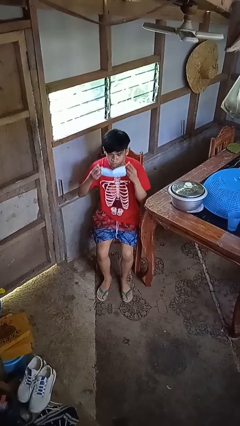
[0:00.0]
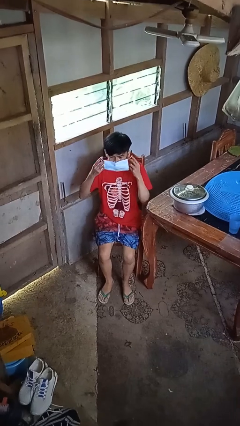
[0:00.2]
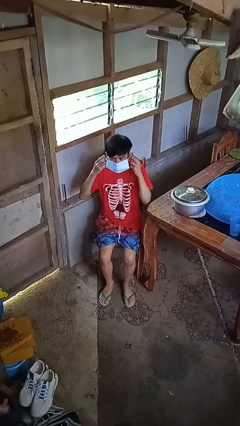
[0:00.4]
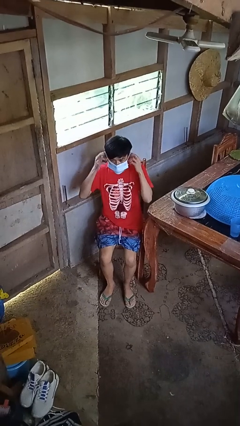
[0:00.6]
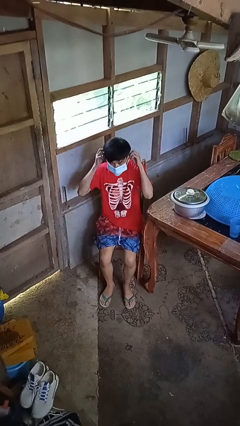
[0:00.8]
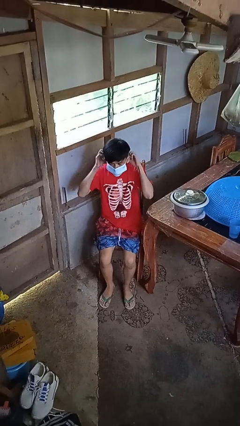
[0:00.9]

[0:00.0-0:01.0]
person puts on facemask

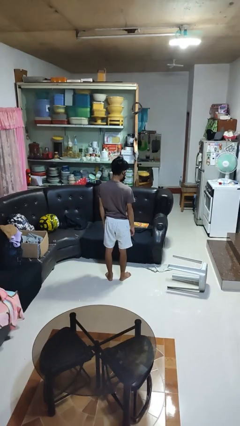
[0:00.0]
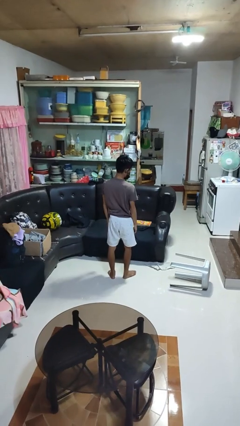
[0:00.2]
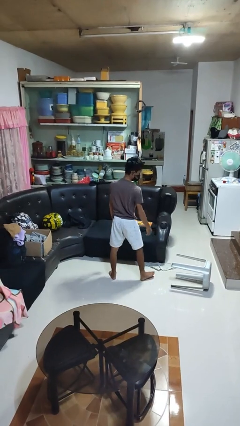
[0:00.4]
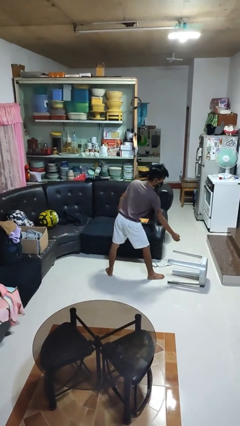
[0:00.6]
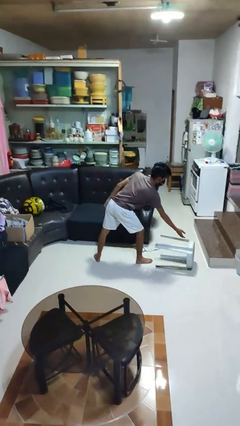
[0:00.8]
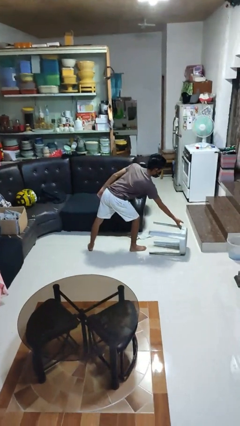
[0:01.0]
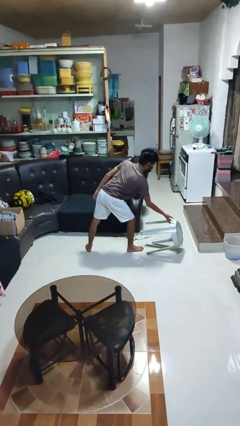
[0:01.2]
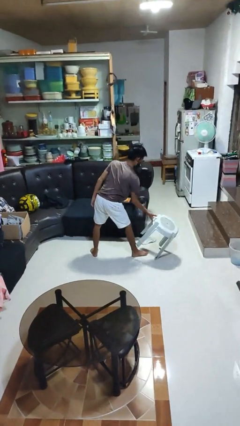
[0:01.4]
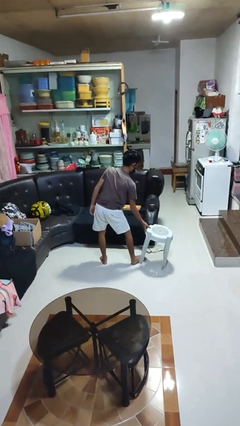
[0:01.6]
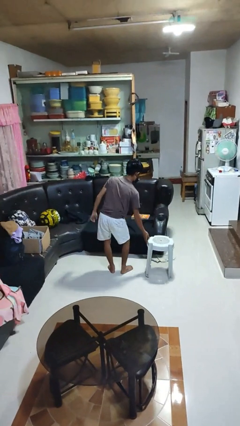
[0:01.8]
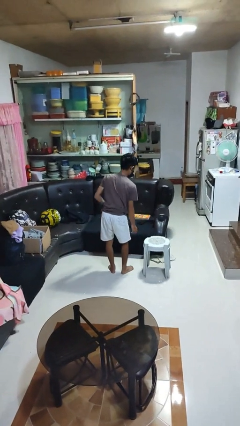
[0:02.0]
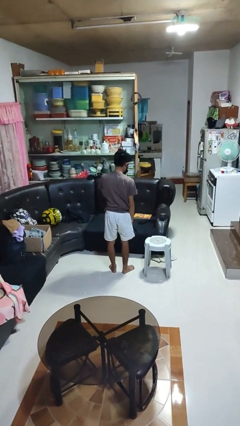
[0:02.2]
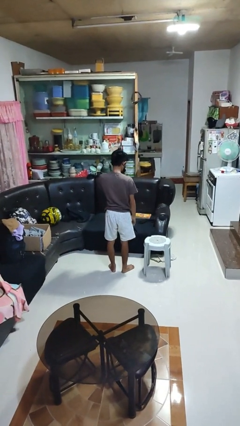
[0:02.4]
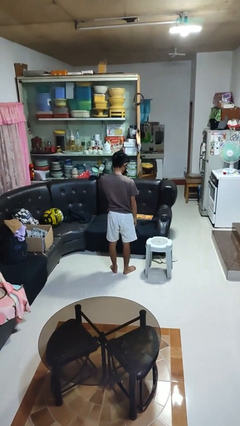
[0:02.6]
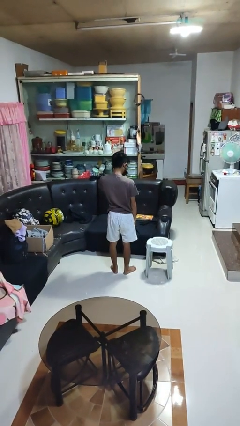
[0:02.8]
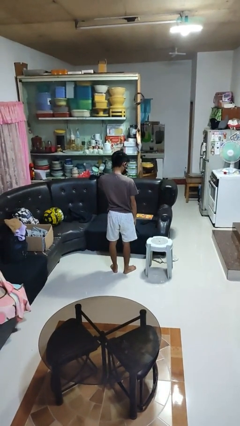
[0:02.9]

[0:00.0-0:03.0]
person sets upright furniture

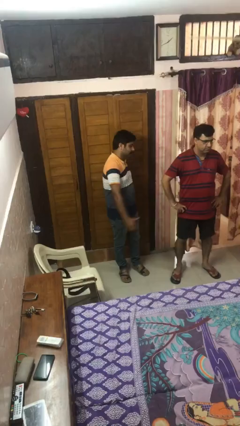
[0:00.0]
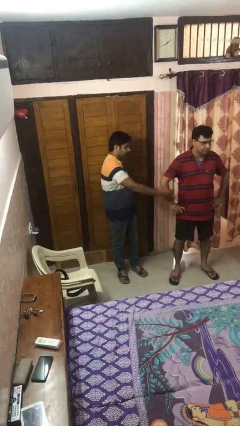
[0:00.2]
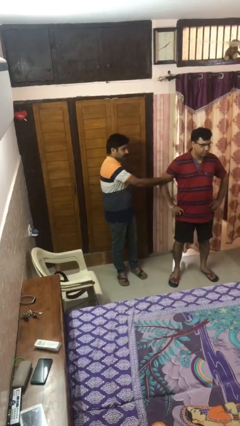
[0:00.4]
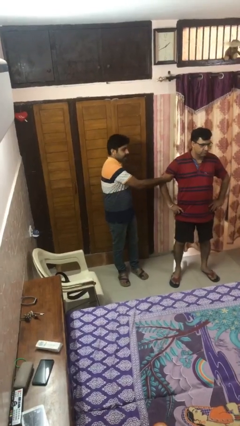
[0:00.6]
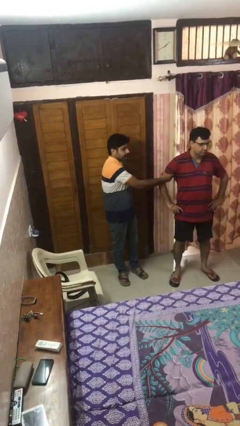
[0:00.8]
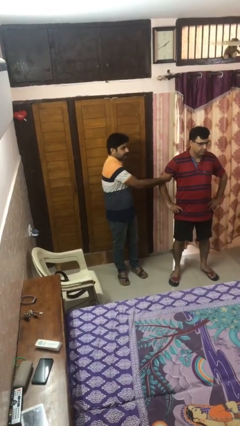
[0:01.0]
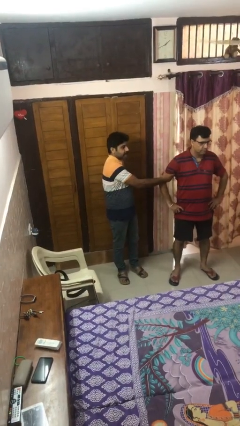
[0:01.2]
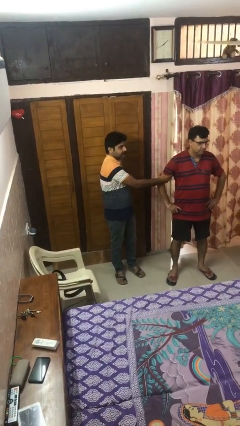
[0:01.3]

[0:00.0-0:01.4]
person grabs person by bicep

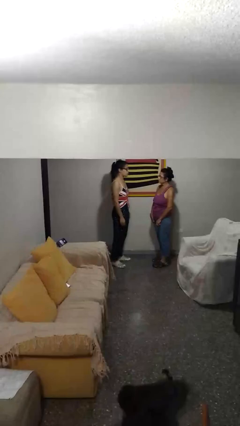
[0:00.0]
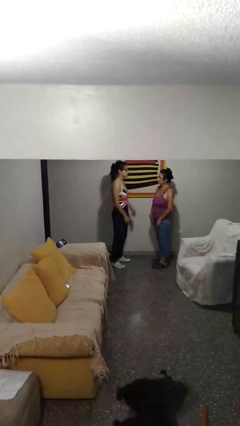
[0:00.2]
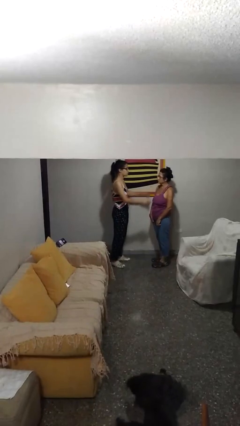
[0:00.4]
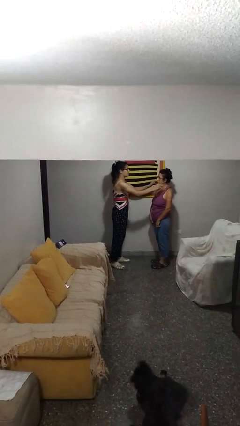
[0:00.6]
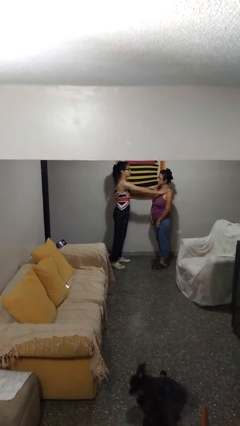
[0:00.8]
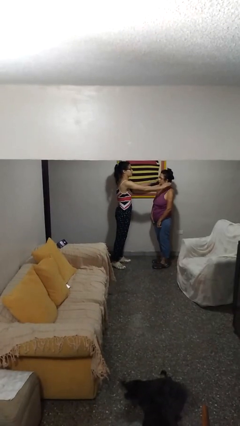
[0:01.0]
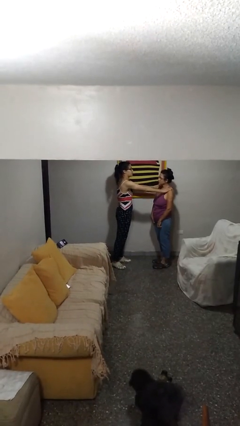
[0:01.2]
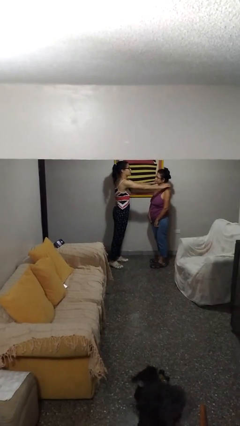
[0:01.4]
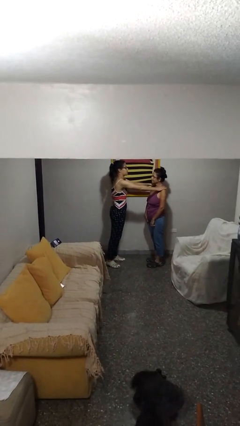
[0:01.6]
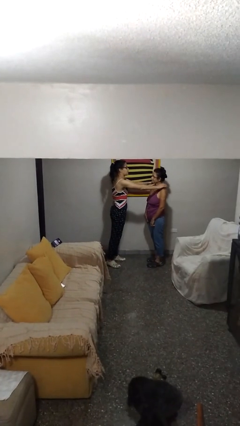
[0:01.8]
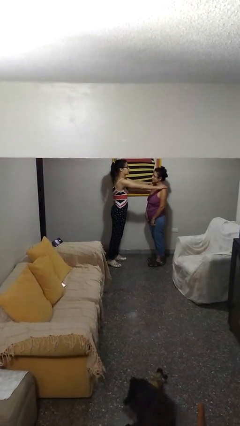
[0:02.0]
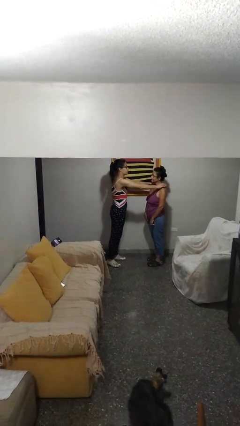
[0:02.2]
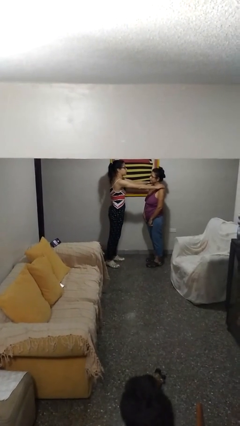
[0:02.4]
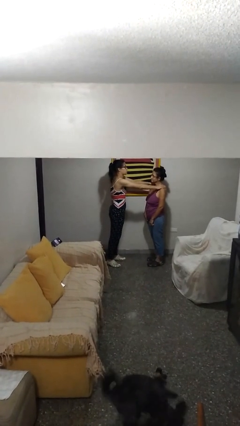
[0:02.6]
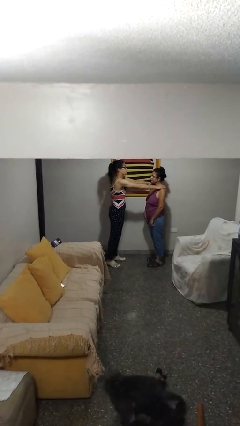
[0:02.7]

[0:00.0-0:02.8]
person pounds shoulders of person

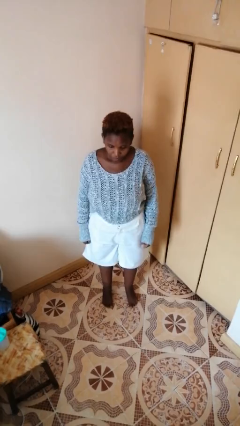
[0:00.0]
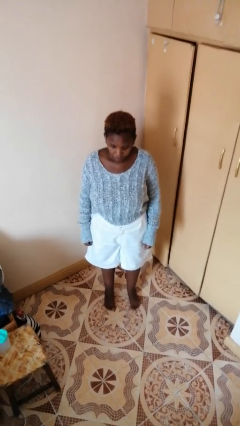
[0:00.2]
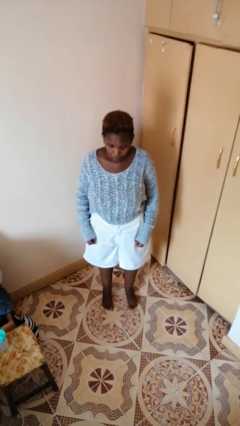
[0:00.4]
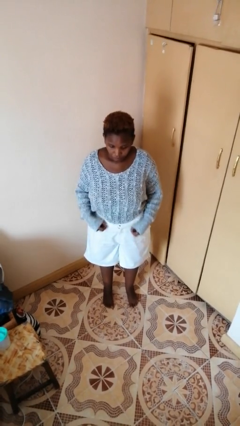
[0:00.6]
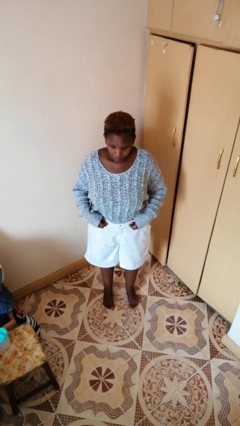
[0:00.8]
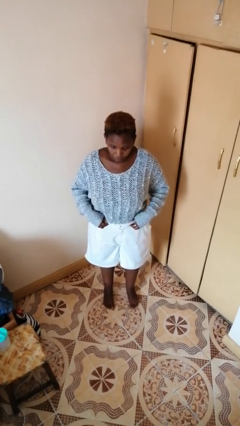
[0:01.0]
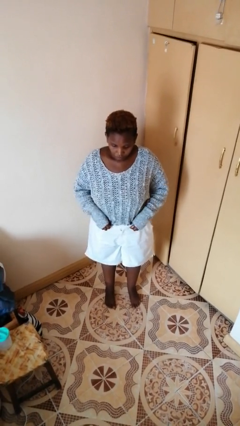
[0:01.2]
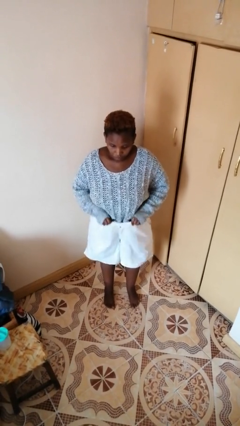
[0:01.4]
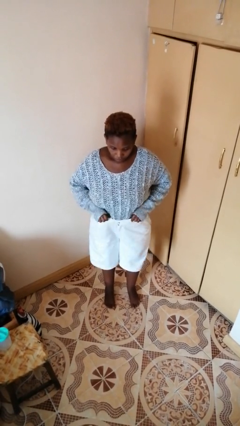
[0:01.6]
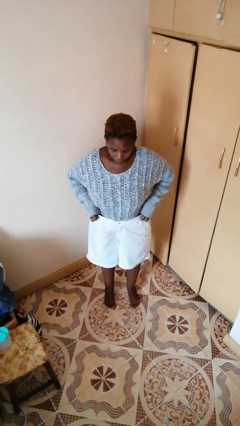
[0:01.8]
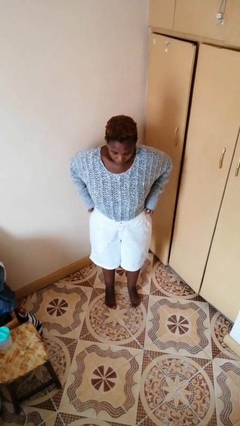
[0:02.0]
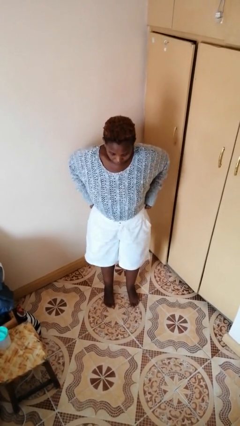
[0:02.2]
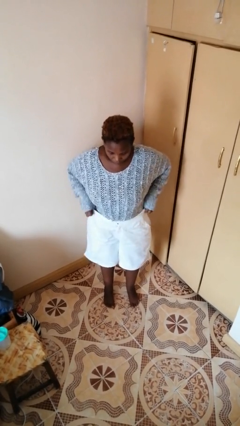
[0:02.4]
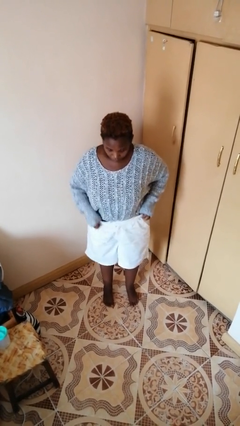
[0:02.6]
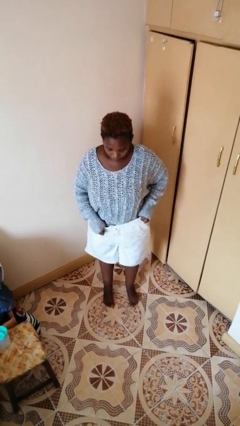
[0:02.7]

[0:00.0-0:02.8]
person hikes up pants

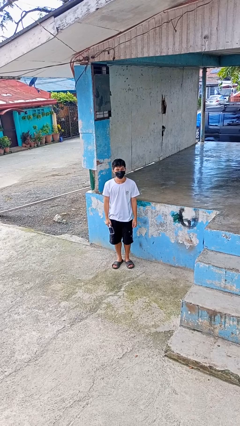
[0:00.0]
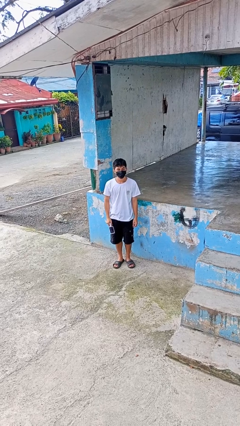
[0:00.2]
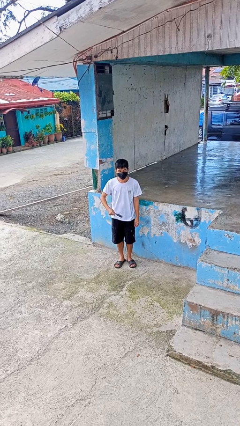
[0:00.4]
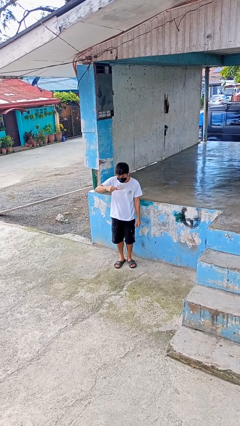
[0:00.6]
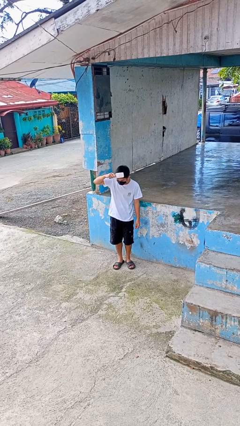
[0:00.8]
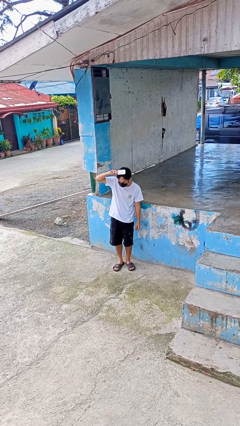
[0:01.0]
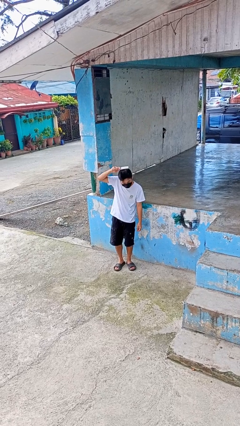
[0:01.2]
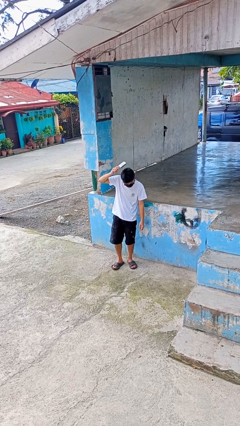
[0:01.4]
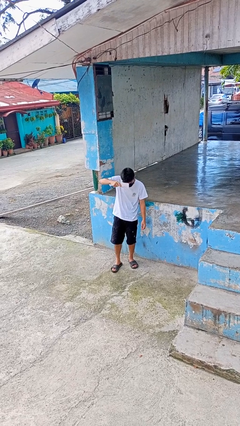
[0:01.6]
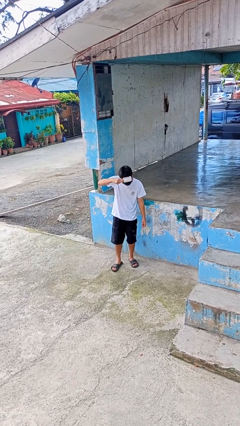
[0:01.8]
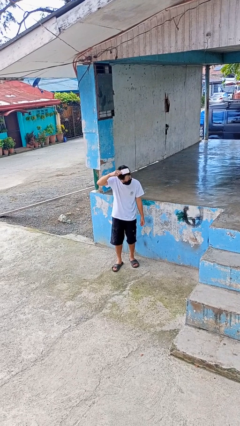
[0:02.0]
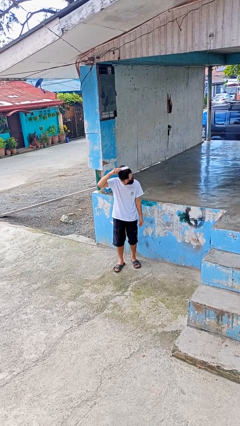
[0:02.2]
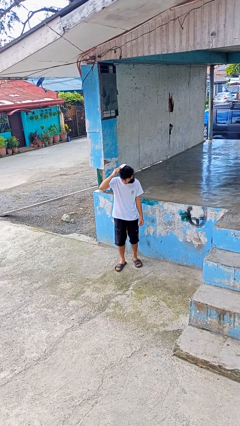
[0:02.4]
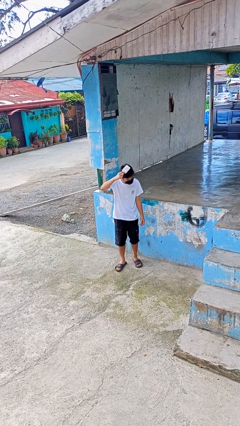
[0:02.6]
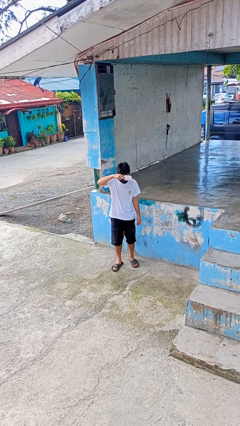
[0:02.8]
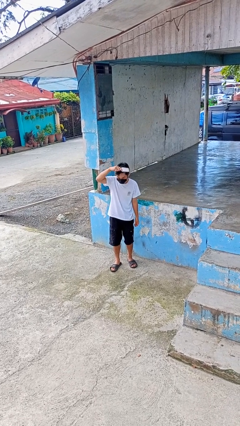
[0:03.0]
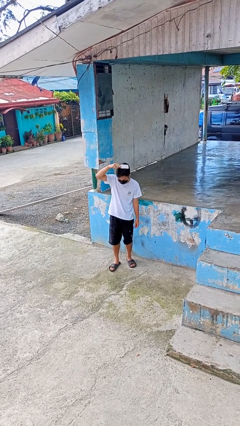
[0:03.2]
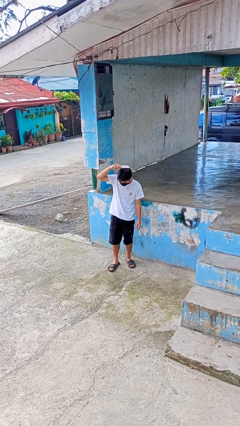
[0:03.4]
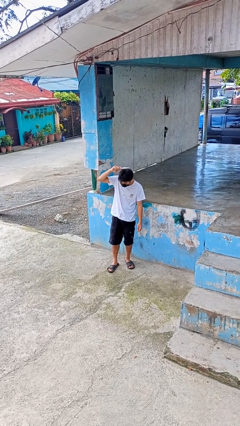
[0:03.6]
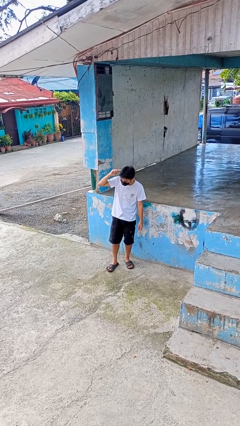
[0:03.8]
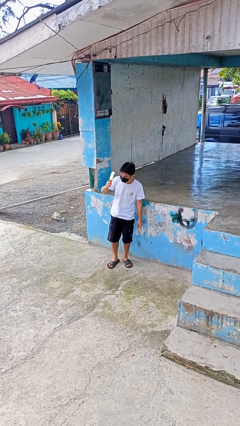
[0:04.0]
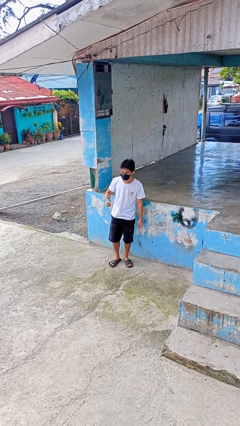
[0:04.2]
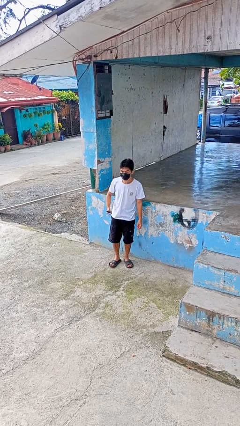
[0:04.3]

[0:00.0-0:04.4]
person brushes hair

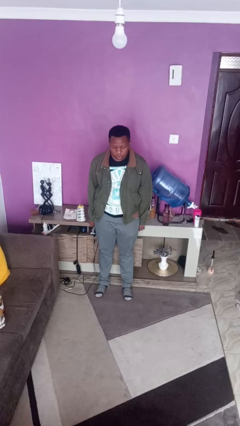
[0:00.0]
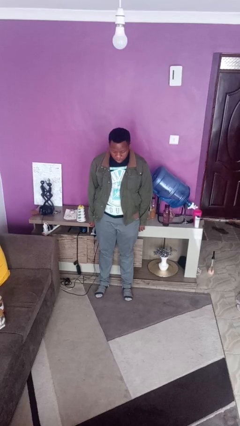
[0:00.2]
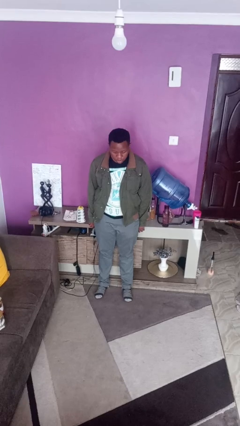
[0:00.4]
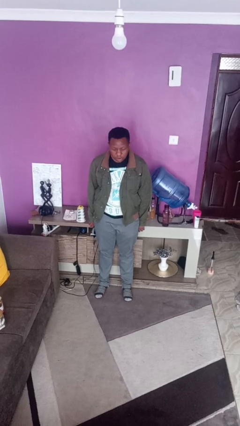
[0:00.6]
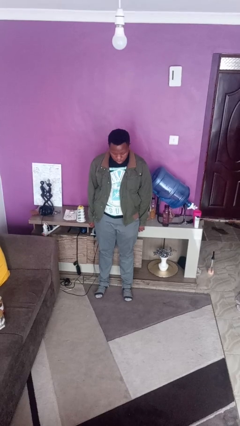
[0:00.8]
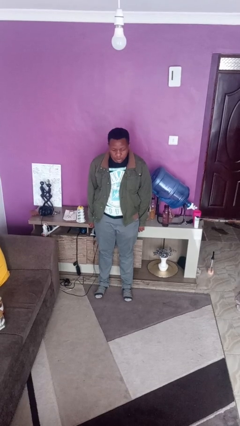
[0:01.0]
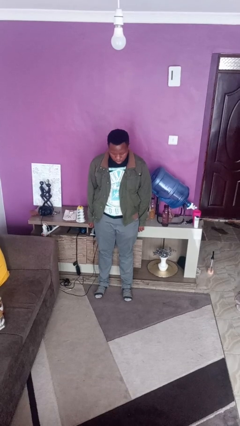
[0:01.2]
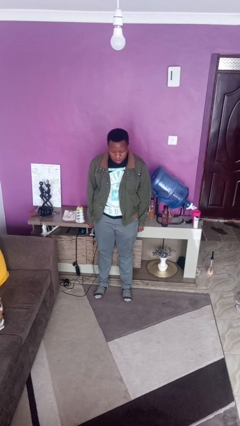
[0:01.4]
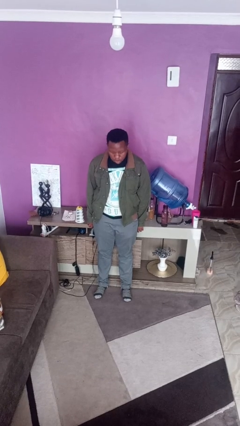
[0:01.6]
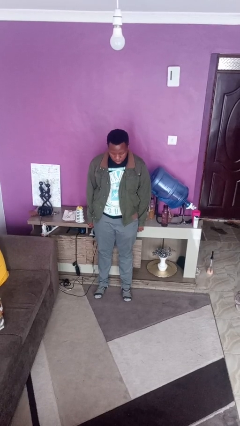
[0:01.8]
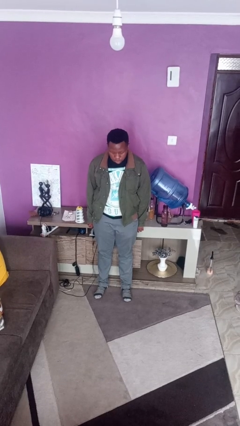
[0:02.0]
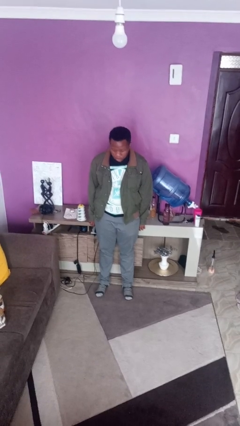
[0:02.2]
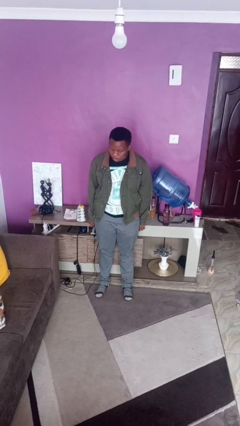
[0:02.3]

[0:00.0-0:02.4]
person nods head
